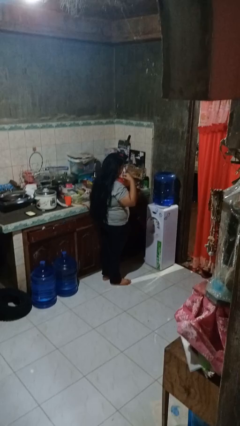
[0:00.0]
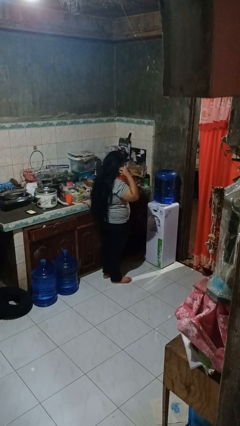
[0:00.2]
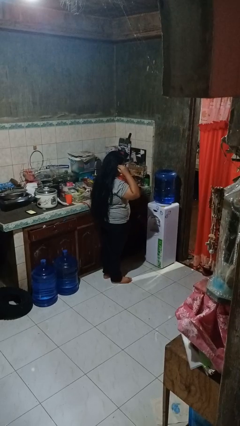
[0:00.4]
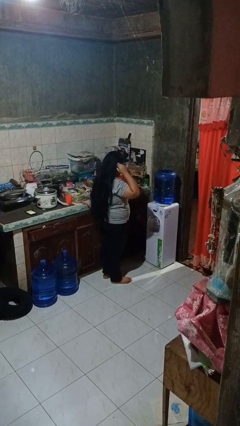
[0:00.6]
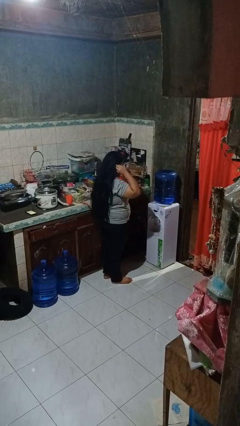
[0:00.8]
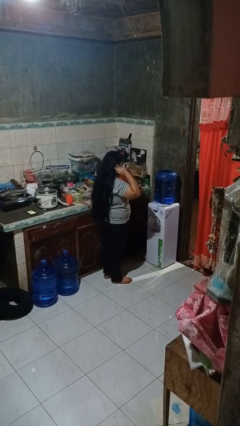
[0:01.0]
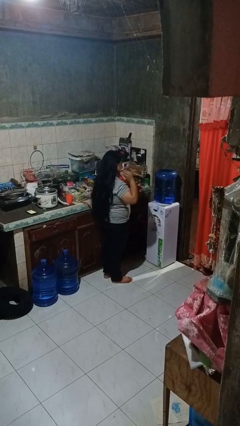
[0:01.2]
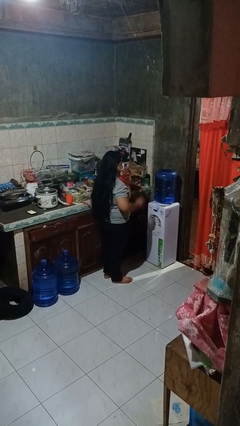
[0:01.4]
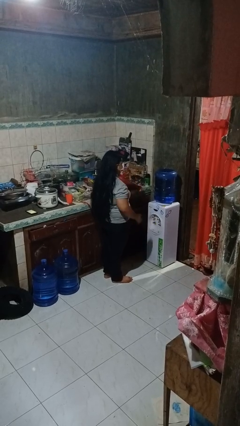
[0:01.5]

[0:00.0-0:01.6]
person puts on facemask

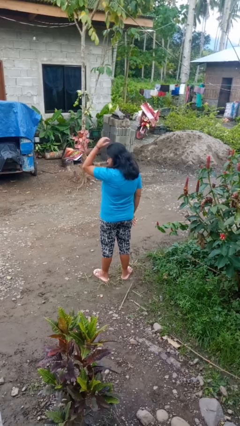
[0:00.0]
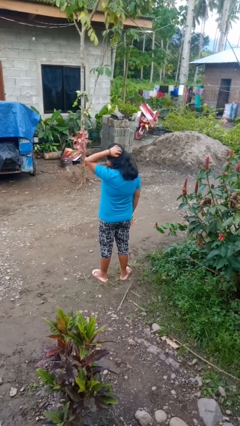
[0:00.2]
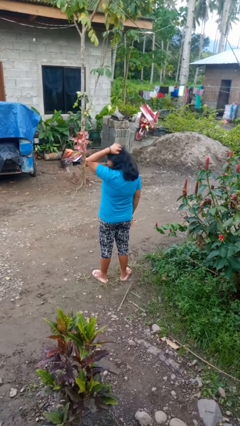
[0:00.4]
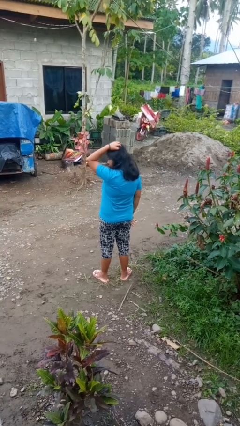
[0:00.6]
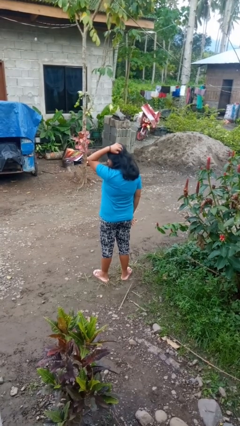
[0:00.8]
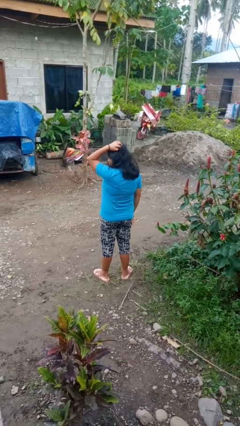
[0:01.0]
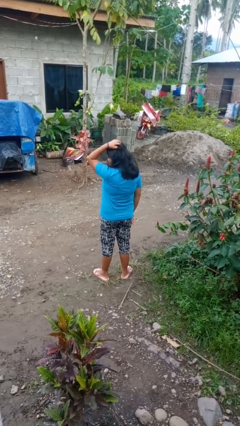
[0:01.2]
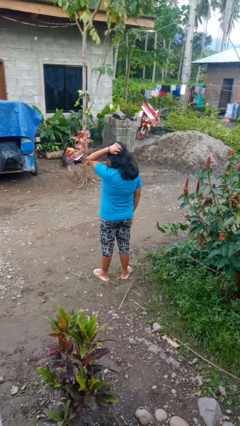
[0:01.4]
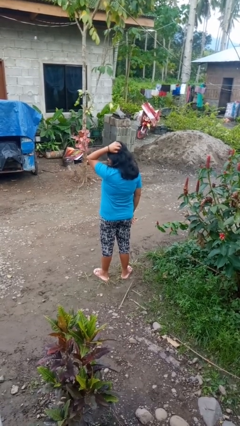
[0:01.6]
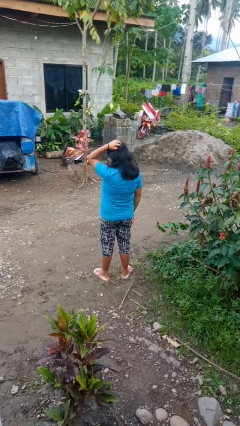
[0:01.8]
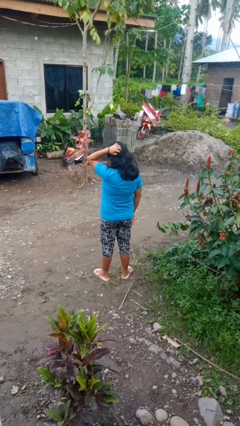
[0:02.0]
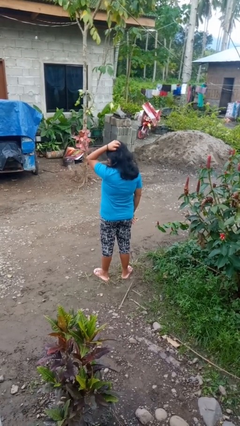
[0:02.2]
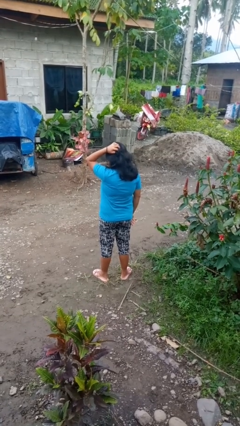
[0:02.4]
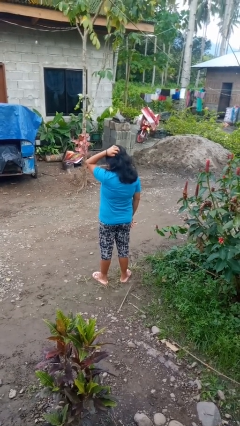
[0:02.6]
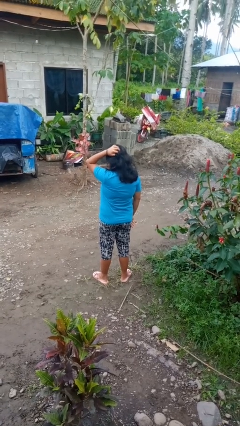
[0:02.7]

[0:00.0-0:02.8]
person scratches face

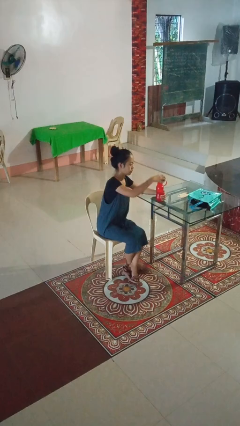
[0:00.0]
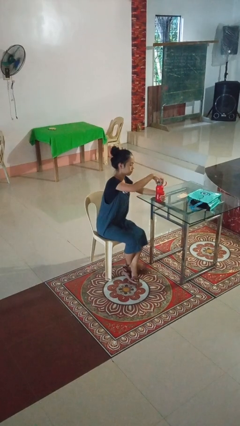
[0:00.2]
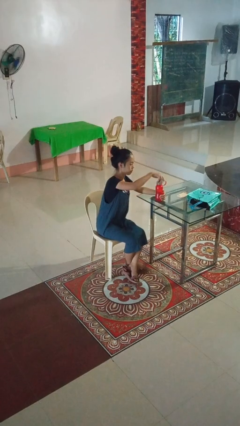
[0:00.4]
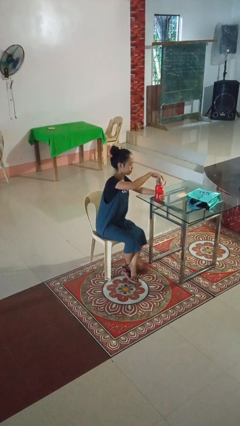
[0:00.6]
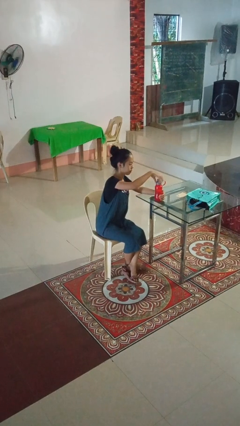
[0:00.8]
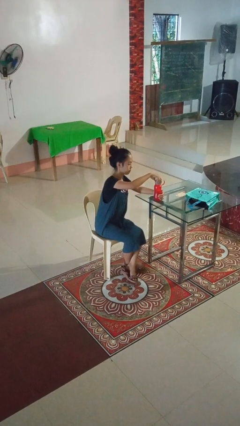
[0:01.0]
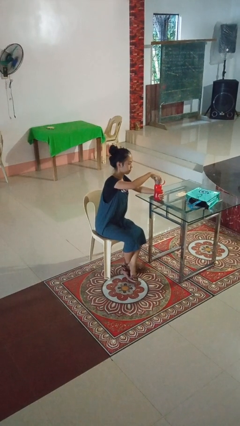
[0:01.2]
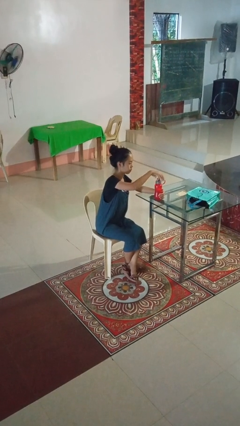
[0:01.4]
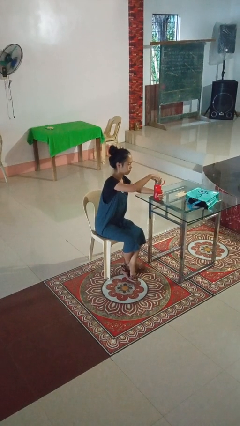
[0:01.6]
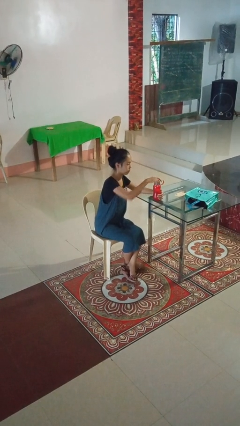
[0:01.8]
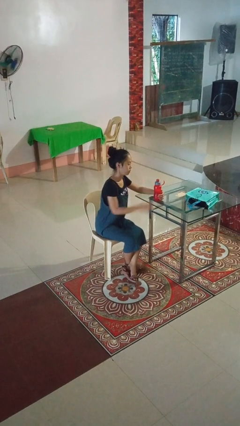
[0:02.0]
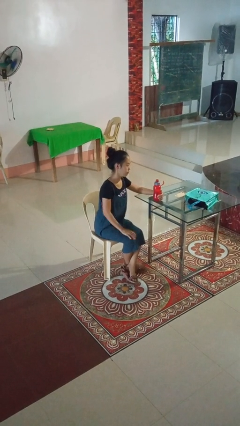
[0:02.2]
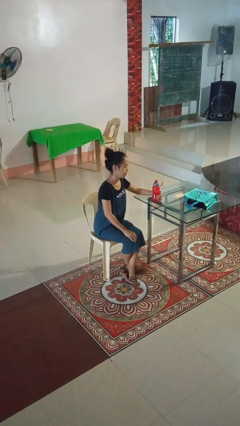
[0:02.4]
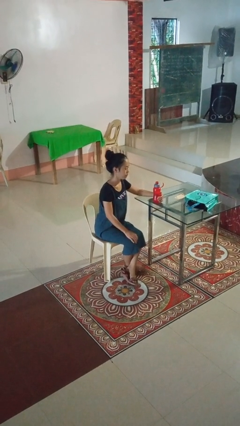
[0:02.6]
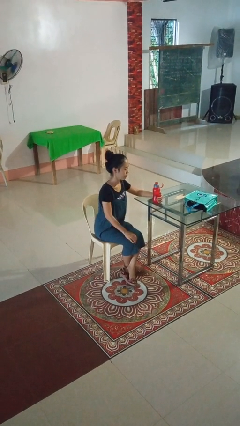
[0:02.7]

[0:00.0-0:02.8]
person screws lid to bottle

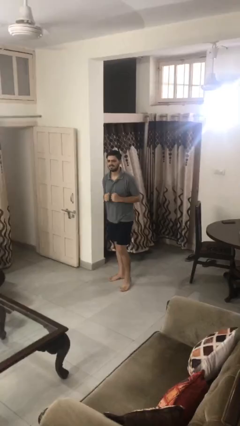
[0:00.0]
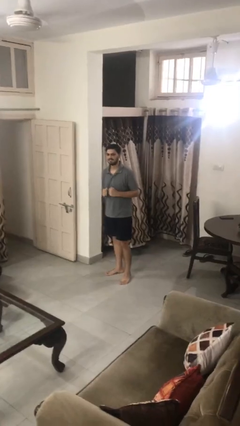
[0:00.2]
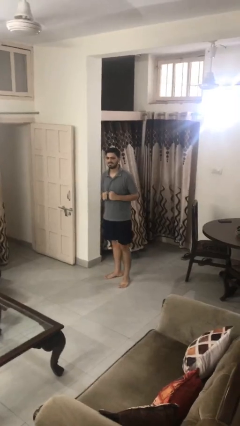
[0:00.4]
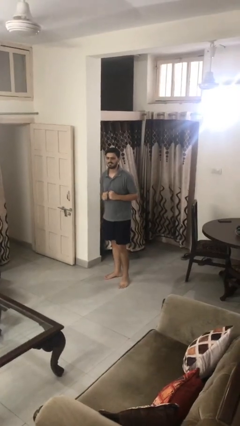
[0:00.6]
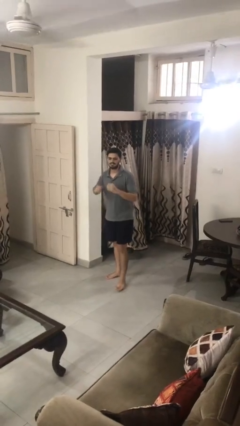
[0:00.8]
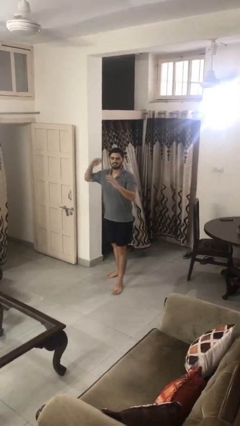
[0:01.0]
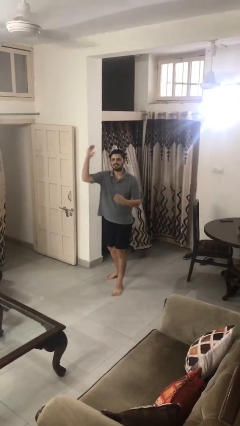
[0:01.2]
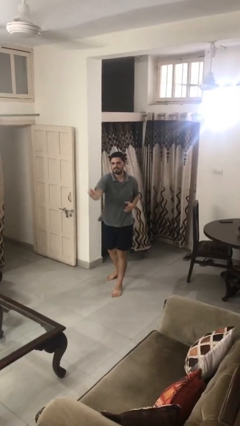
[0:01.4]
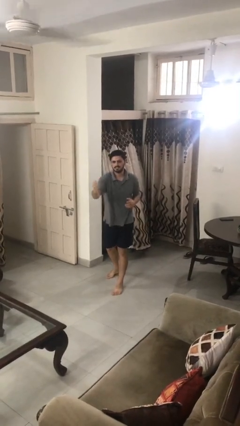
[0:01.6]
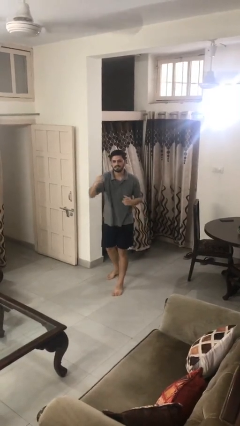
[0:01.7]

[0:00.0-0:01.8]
person karate chop

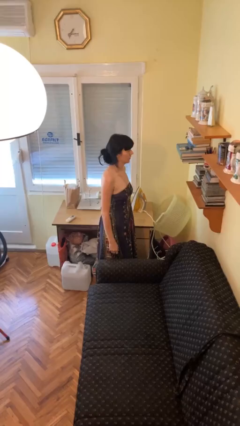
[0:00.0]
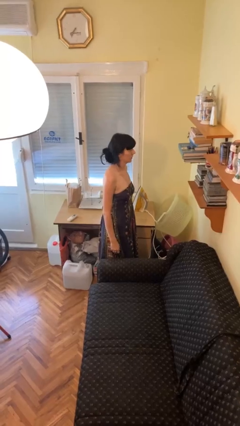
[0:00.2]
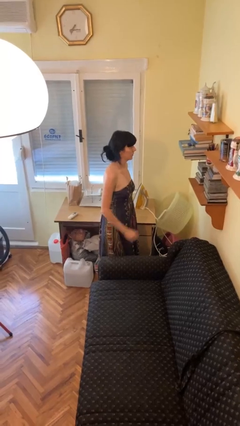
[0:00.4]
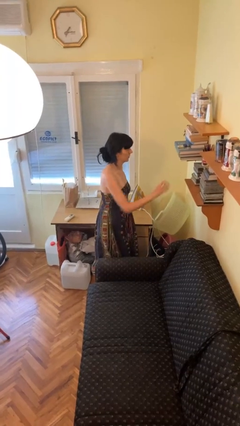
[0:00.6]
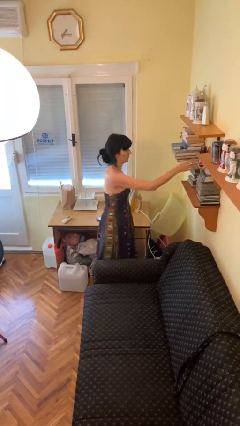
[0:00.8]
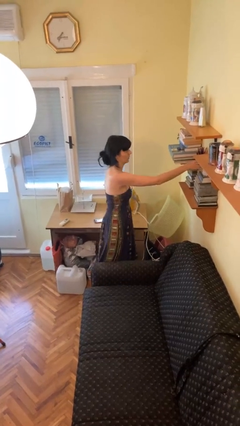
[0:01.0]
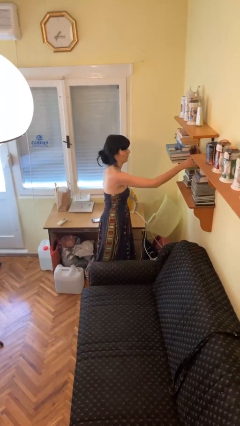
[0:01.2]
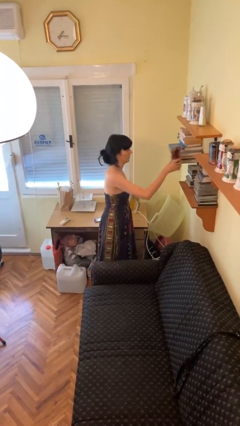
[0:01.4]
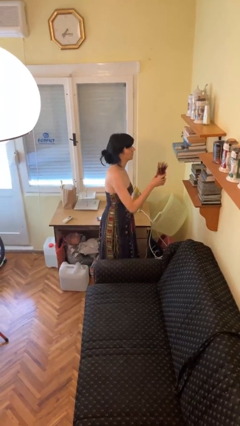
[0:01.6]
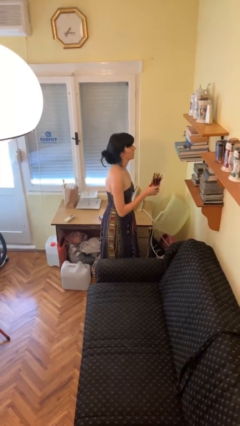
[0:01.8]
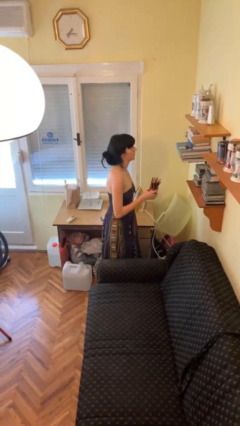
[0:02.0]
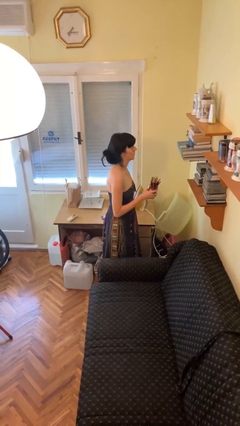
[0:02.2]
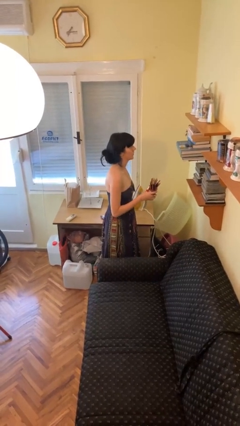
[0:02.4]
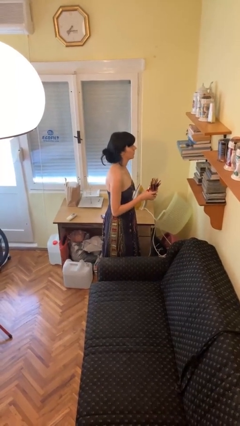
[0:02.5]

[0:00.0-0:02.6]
person picks up object from shelf

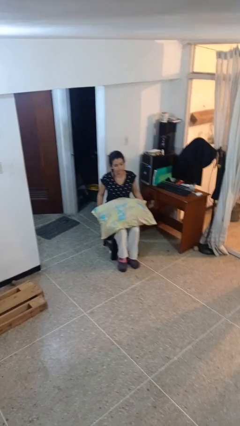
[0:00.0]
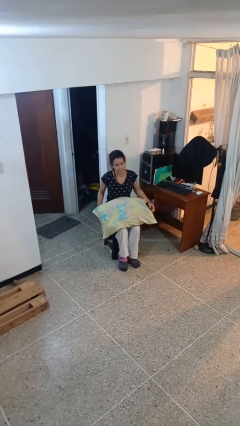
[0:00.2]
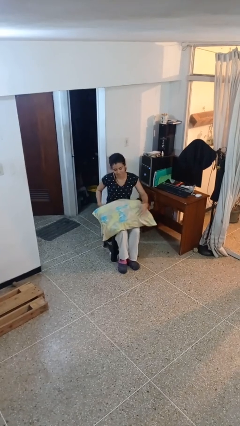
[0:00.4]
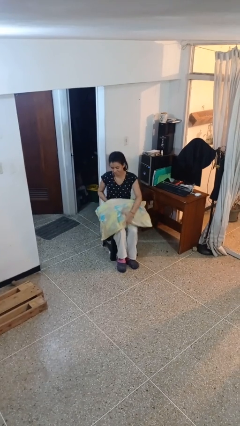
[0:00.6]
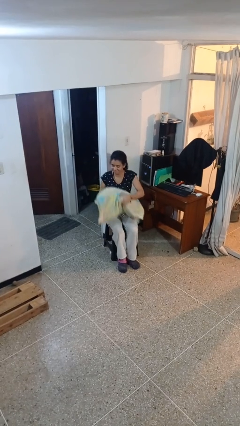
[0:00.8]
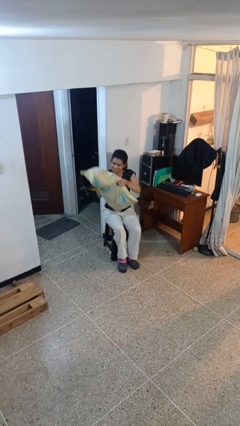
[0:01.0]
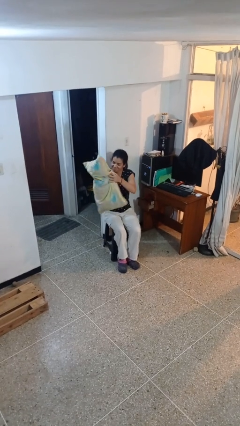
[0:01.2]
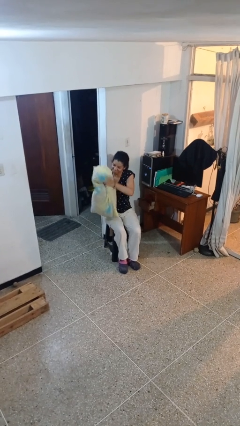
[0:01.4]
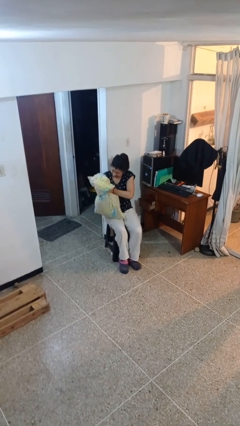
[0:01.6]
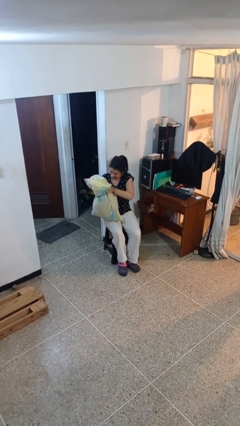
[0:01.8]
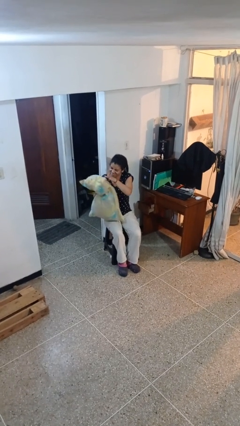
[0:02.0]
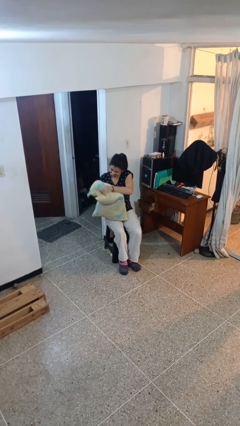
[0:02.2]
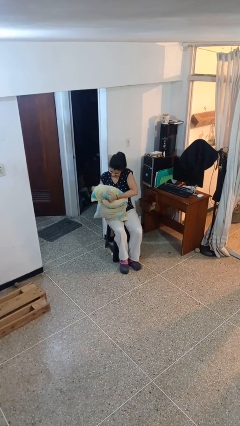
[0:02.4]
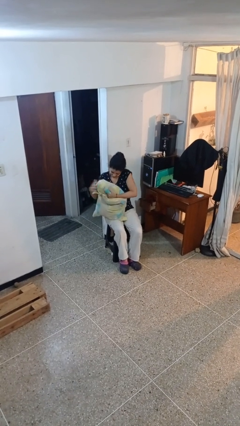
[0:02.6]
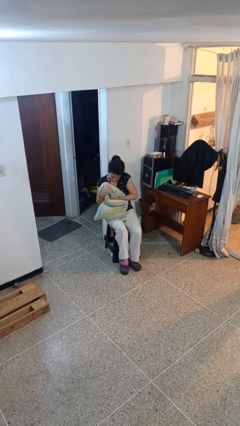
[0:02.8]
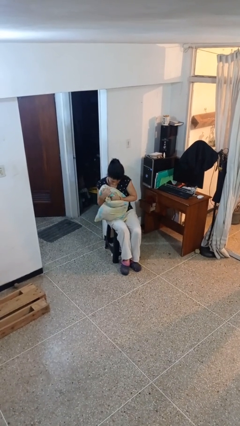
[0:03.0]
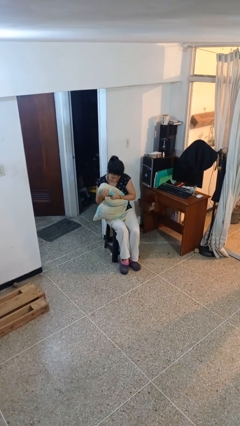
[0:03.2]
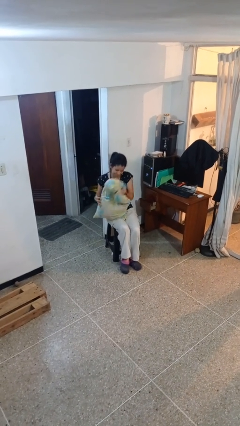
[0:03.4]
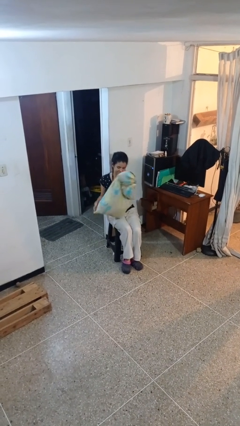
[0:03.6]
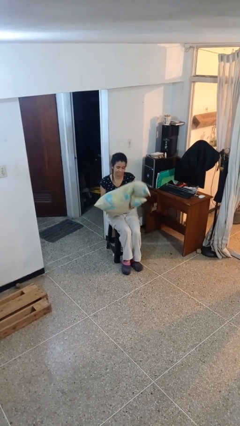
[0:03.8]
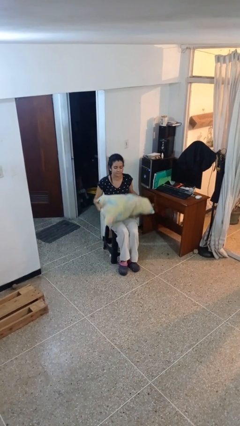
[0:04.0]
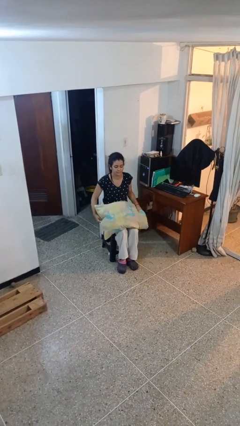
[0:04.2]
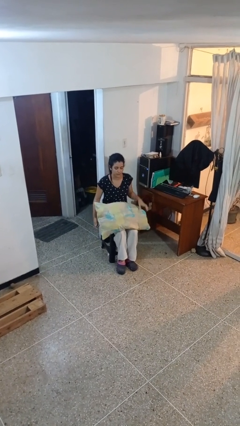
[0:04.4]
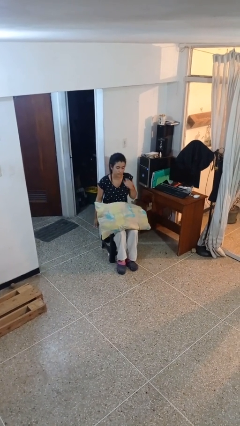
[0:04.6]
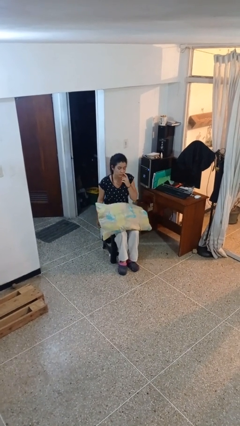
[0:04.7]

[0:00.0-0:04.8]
person squeezes object

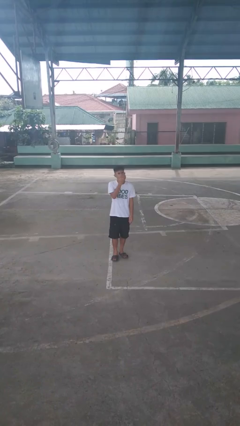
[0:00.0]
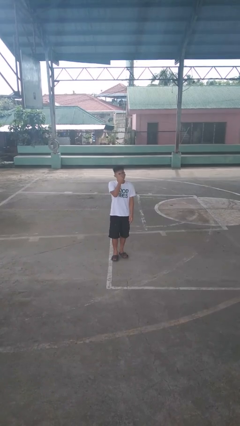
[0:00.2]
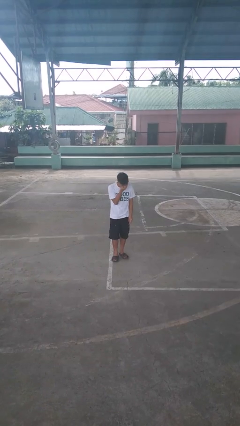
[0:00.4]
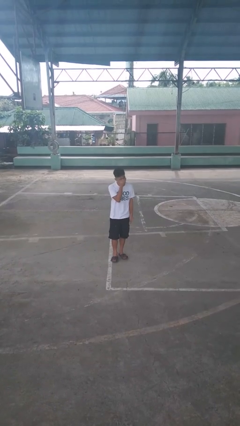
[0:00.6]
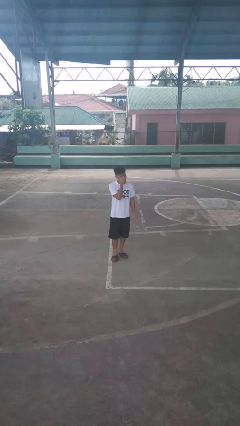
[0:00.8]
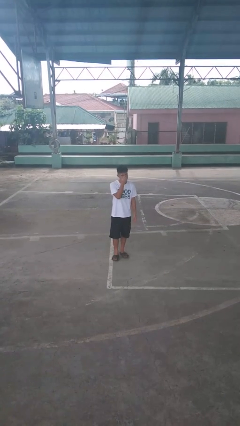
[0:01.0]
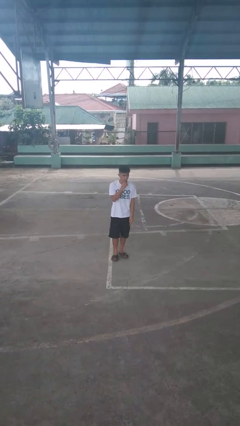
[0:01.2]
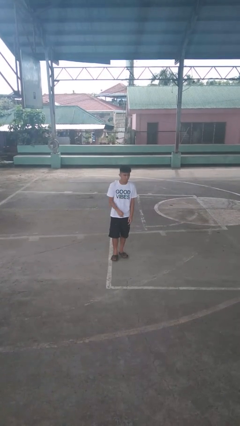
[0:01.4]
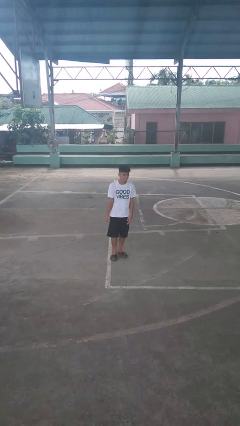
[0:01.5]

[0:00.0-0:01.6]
person sneezes into hand
